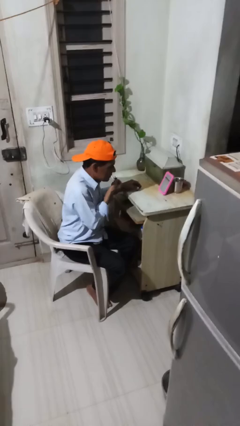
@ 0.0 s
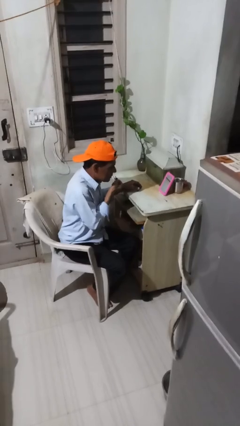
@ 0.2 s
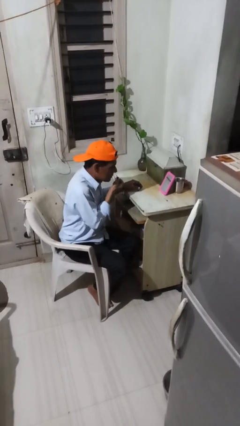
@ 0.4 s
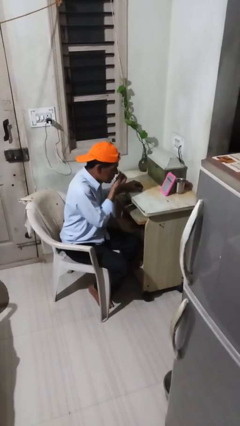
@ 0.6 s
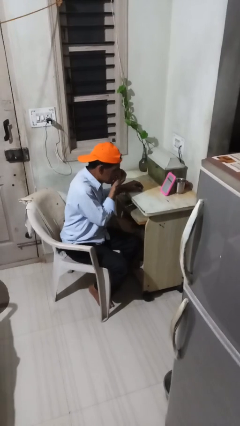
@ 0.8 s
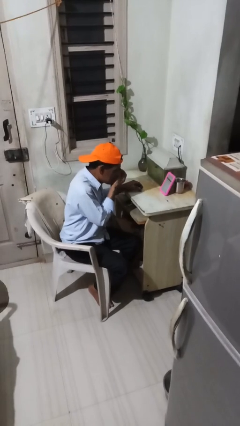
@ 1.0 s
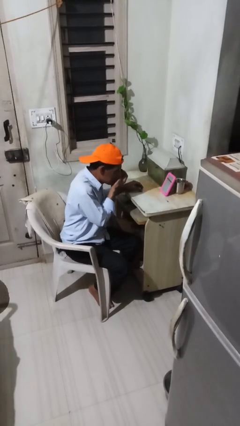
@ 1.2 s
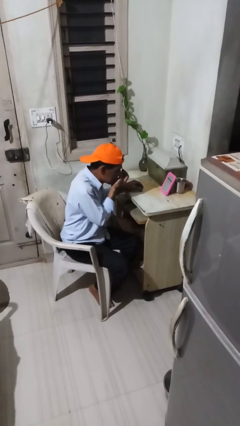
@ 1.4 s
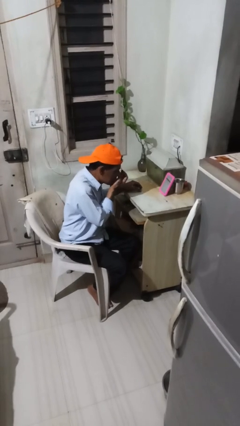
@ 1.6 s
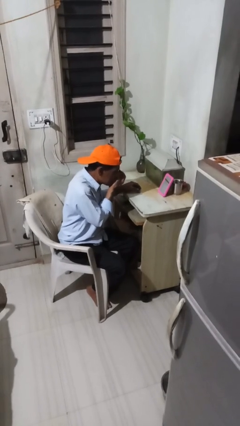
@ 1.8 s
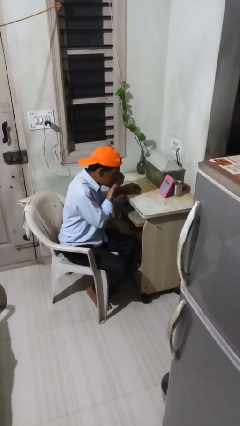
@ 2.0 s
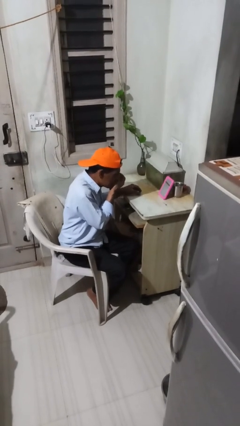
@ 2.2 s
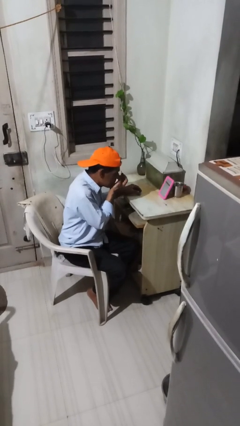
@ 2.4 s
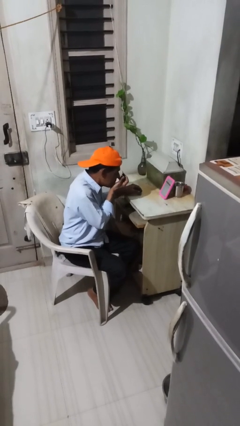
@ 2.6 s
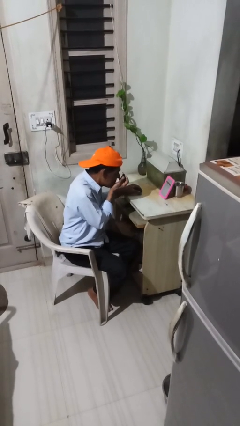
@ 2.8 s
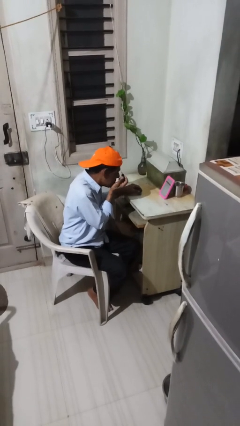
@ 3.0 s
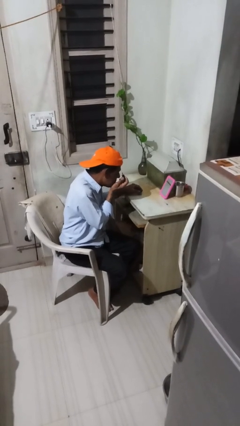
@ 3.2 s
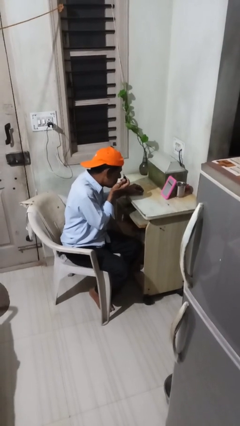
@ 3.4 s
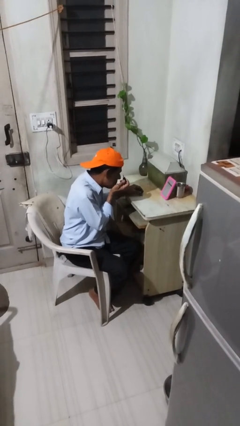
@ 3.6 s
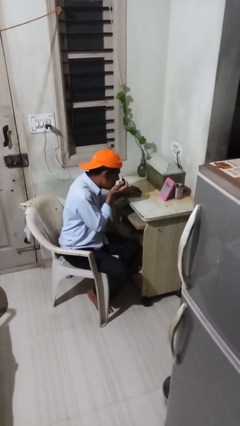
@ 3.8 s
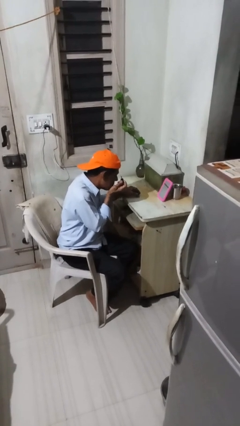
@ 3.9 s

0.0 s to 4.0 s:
person applies eye makeup

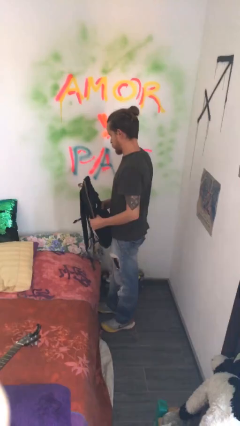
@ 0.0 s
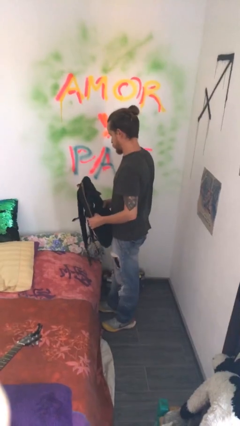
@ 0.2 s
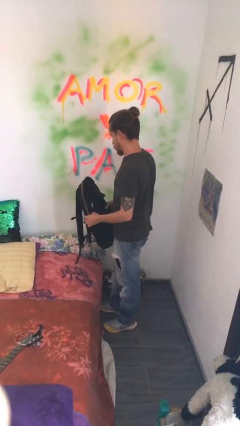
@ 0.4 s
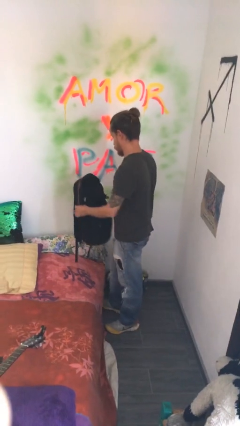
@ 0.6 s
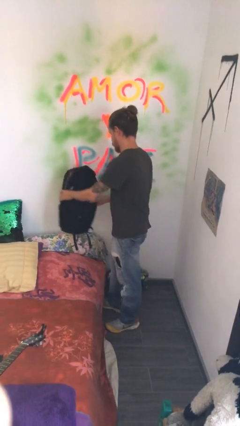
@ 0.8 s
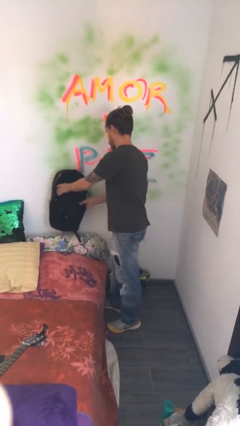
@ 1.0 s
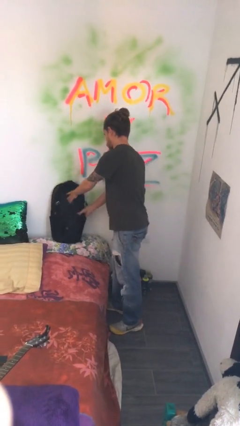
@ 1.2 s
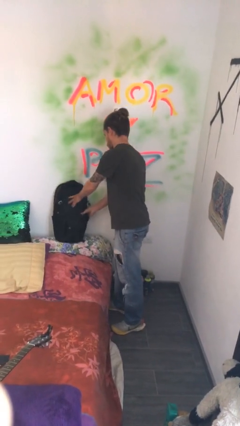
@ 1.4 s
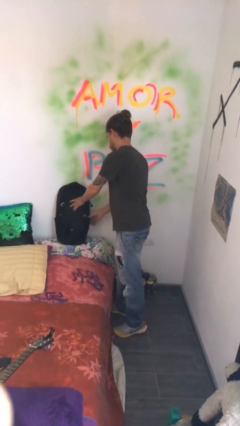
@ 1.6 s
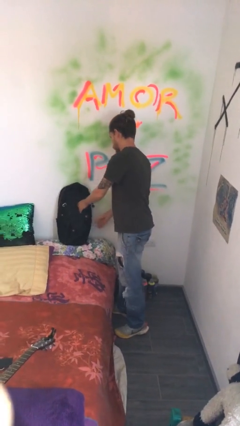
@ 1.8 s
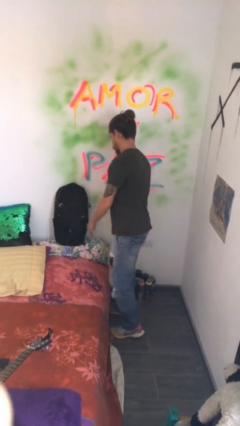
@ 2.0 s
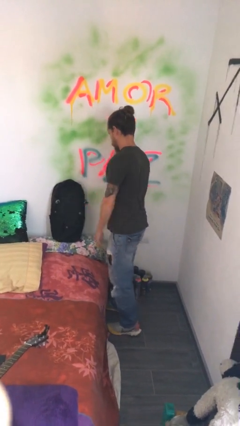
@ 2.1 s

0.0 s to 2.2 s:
person puts down object on bed

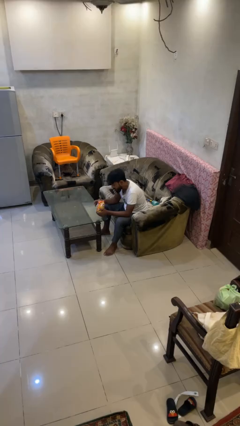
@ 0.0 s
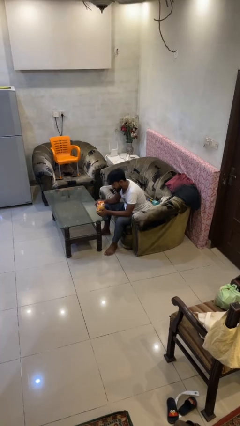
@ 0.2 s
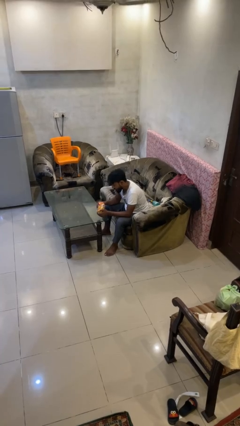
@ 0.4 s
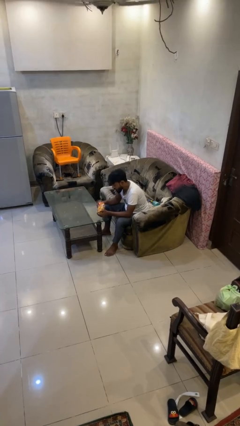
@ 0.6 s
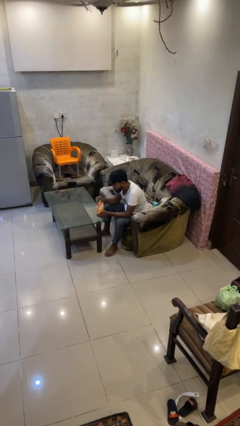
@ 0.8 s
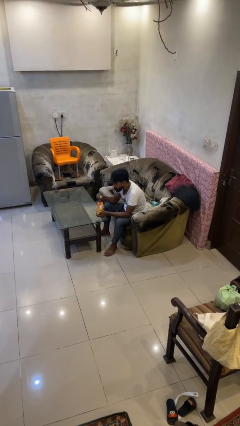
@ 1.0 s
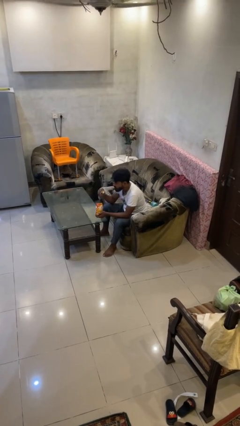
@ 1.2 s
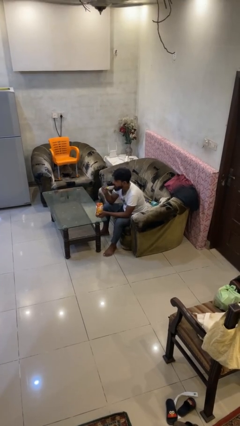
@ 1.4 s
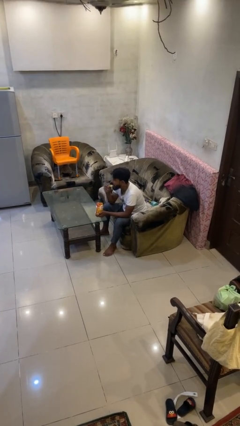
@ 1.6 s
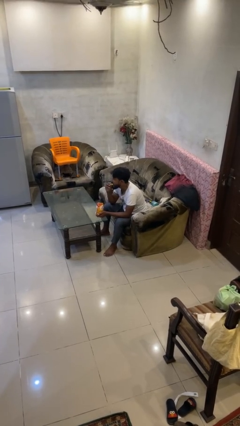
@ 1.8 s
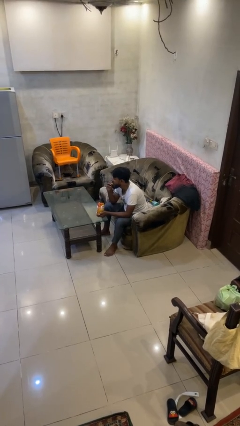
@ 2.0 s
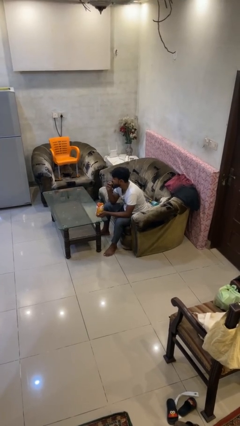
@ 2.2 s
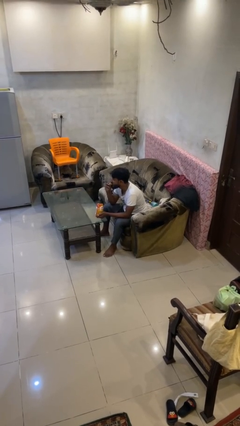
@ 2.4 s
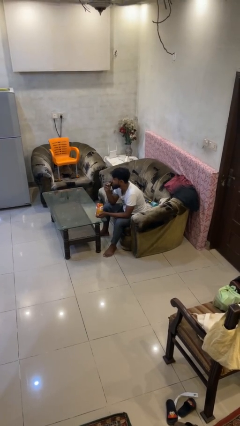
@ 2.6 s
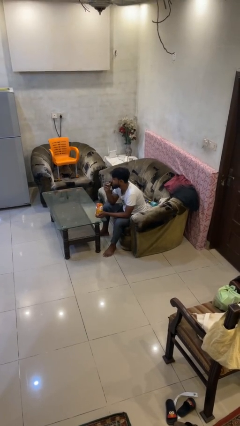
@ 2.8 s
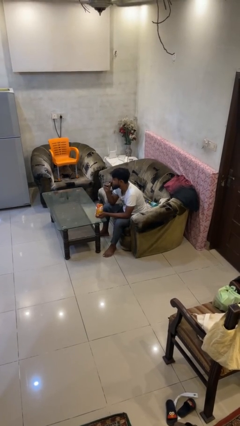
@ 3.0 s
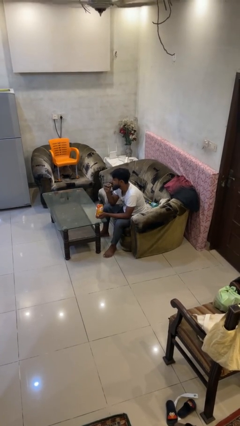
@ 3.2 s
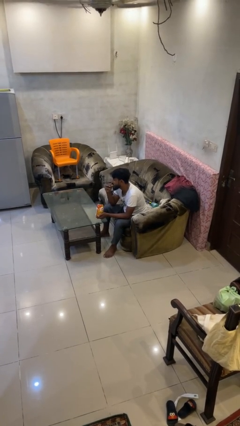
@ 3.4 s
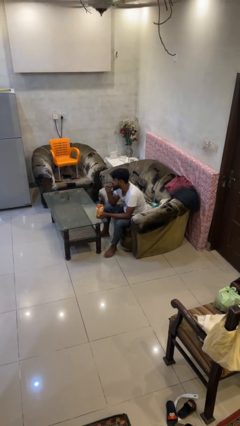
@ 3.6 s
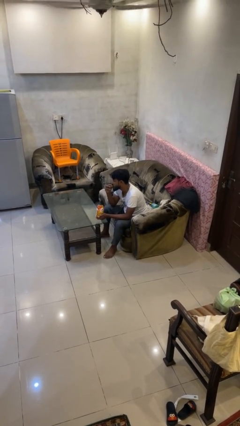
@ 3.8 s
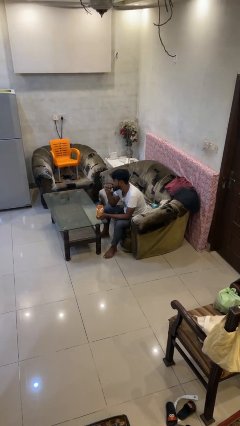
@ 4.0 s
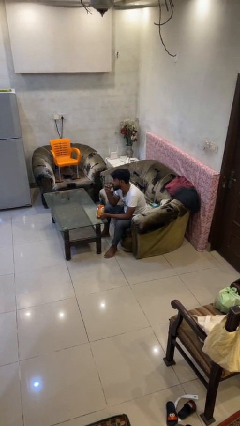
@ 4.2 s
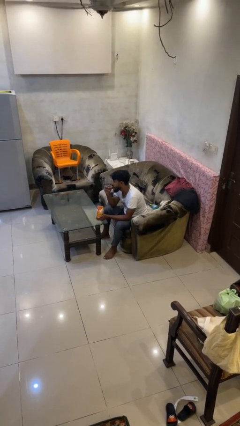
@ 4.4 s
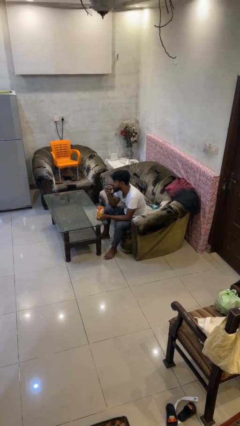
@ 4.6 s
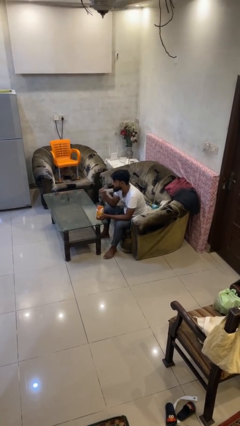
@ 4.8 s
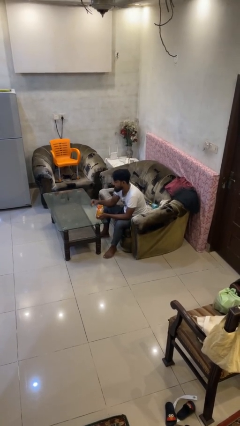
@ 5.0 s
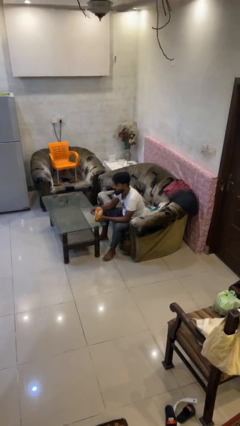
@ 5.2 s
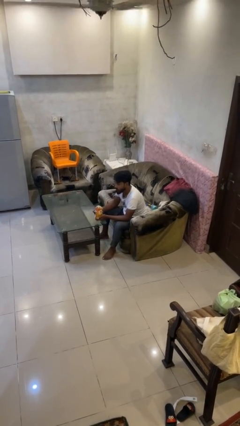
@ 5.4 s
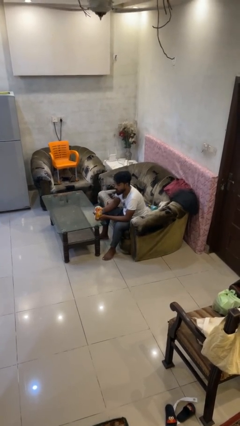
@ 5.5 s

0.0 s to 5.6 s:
person eats snack from bag

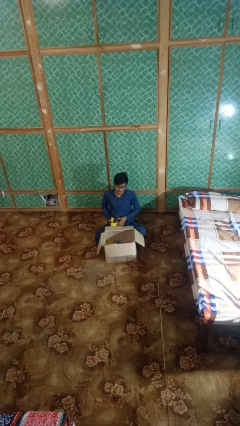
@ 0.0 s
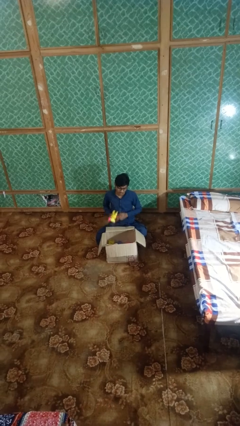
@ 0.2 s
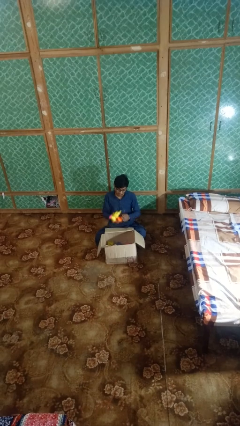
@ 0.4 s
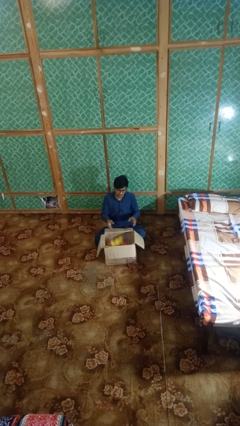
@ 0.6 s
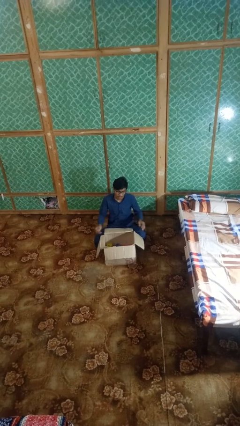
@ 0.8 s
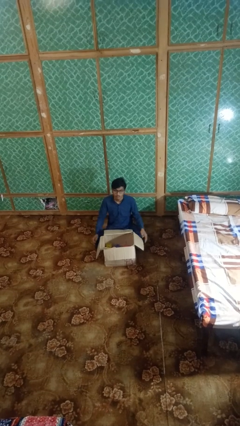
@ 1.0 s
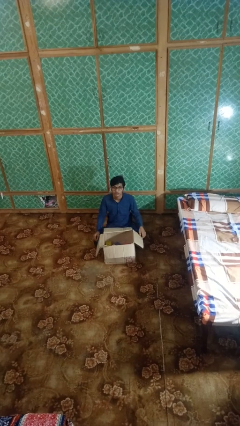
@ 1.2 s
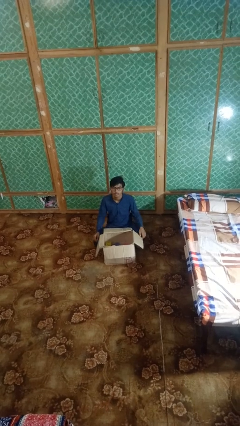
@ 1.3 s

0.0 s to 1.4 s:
person puts object into box

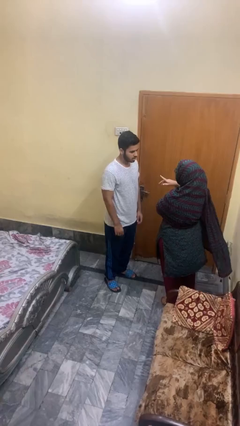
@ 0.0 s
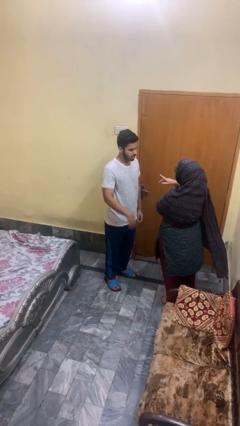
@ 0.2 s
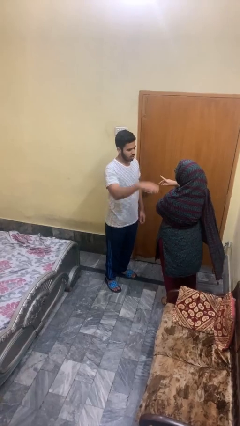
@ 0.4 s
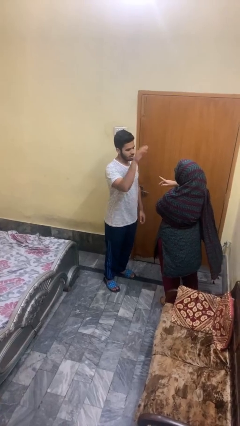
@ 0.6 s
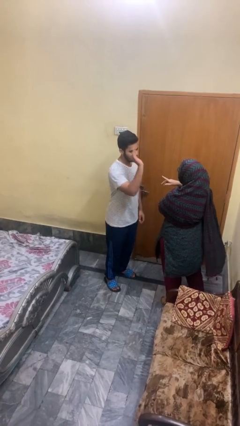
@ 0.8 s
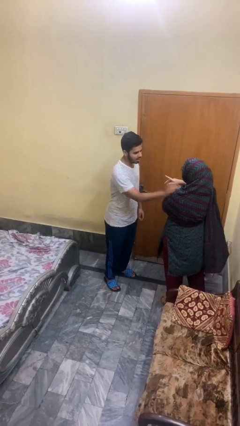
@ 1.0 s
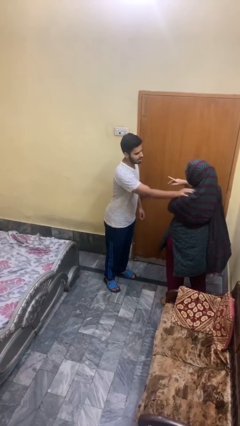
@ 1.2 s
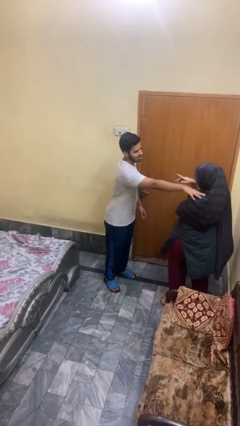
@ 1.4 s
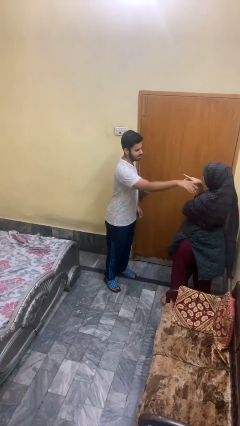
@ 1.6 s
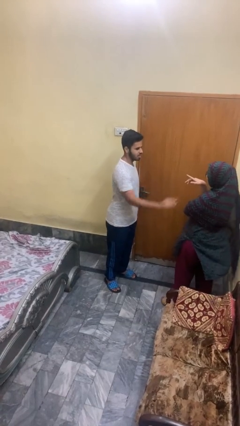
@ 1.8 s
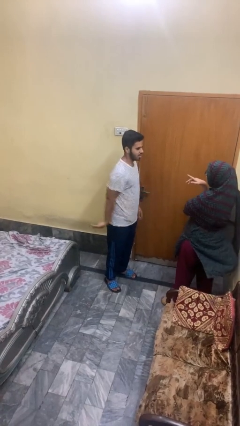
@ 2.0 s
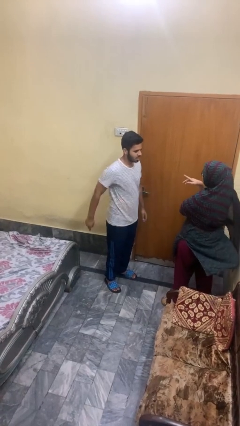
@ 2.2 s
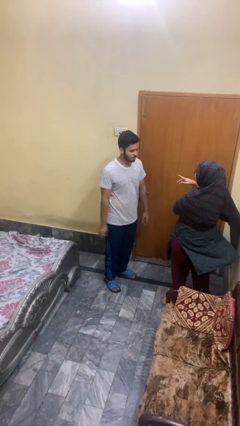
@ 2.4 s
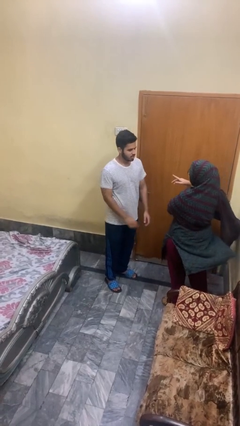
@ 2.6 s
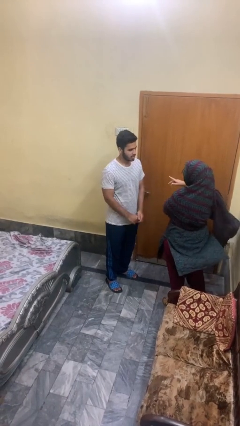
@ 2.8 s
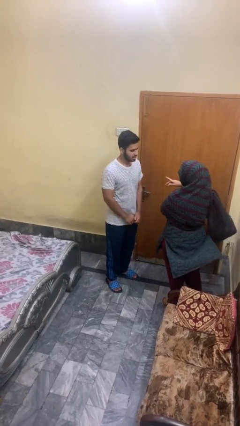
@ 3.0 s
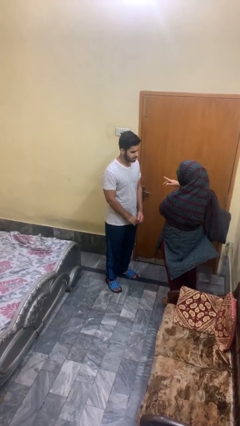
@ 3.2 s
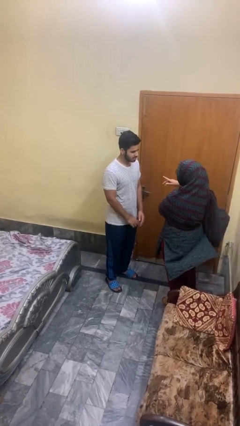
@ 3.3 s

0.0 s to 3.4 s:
person shoves person

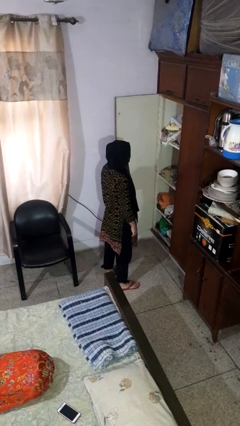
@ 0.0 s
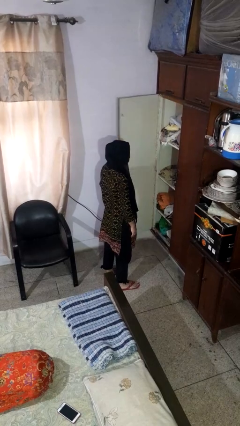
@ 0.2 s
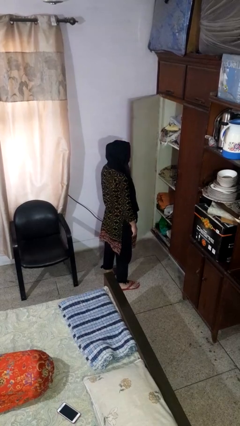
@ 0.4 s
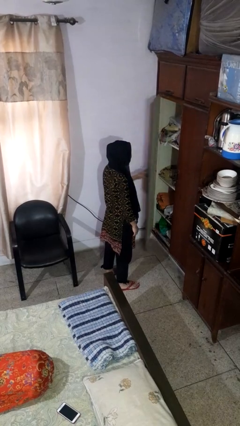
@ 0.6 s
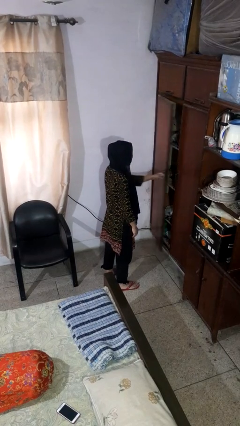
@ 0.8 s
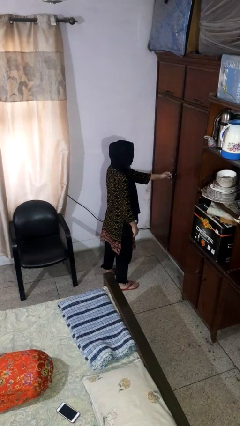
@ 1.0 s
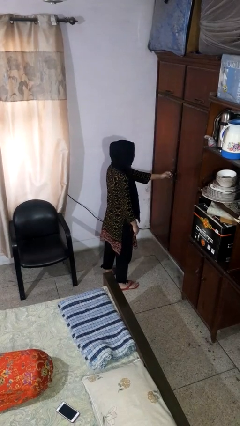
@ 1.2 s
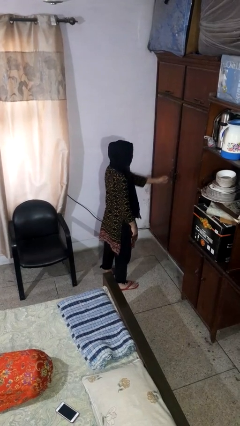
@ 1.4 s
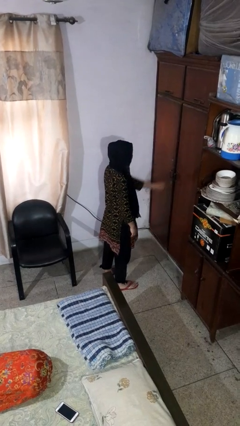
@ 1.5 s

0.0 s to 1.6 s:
person closes closet door
